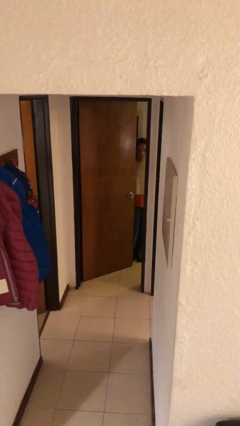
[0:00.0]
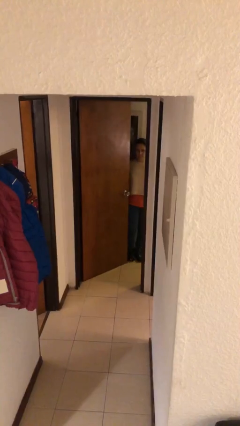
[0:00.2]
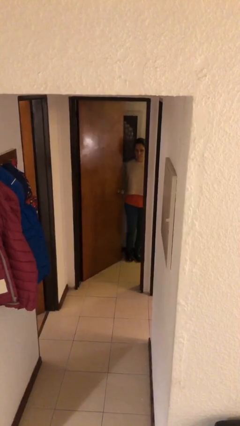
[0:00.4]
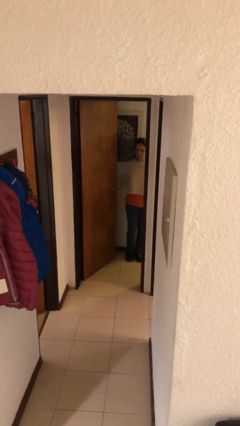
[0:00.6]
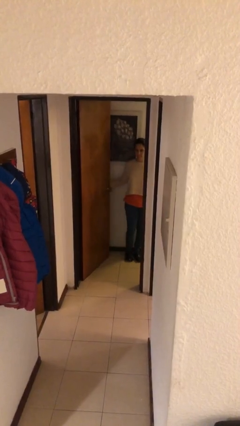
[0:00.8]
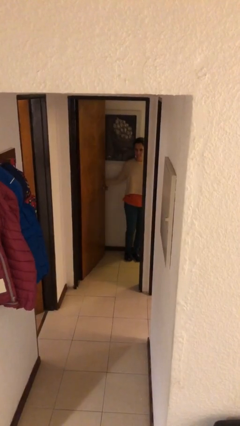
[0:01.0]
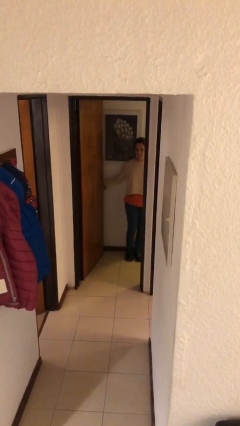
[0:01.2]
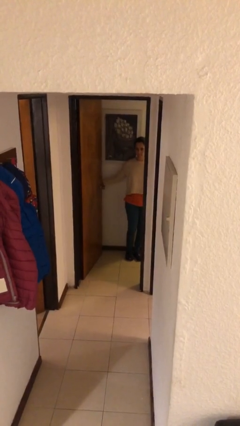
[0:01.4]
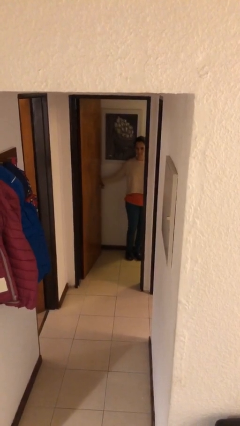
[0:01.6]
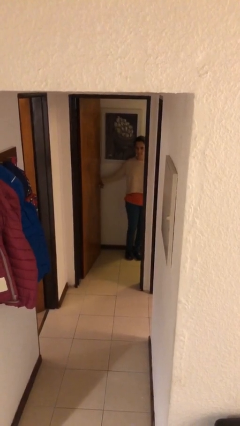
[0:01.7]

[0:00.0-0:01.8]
person opens facility door

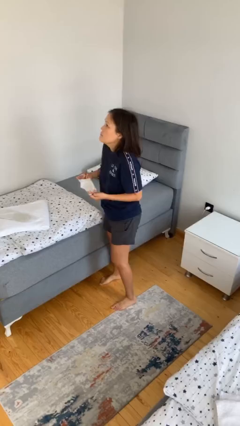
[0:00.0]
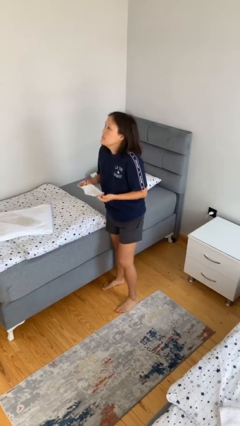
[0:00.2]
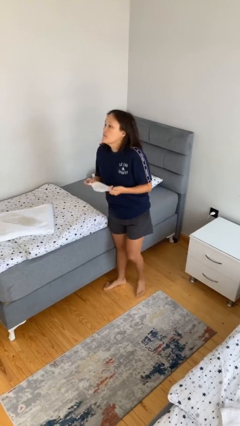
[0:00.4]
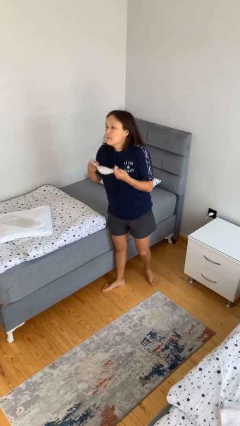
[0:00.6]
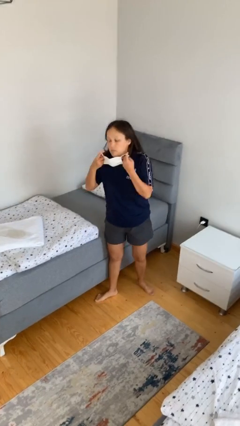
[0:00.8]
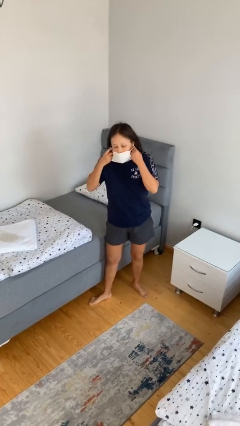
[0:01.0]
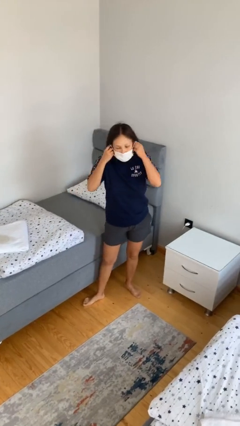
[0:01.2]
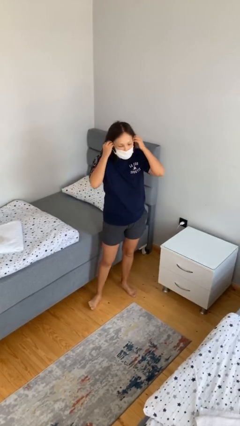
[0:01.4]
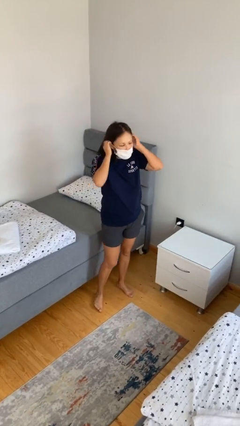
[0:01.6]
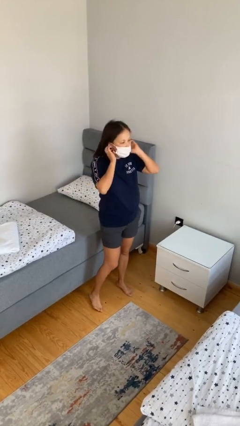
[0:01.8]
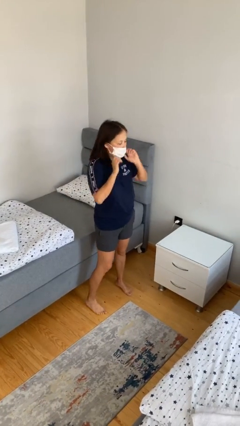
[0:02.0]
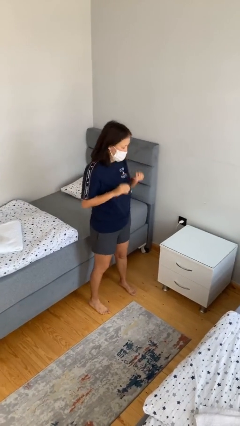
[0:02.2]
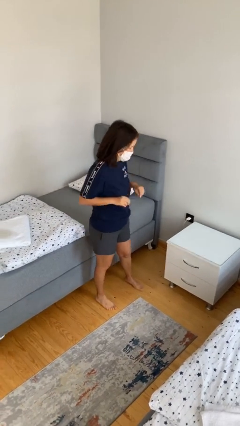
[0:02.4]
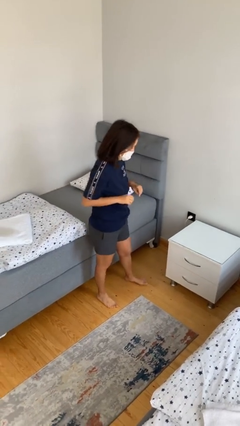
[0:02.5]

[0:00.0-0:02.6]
person puts on facemask

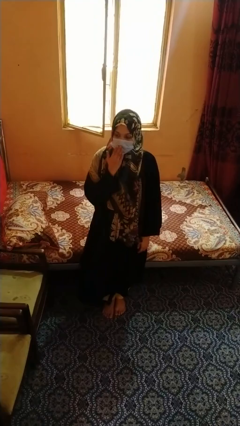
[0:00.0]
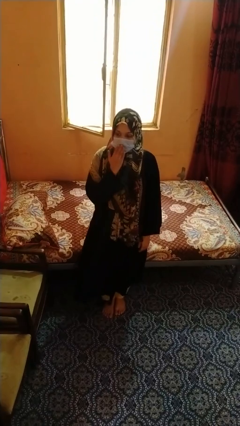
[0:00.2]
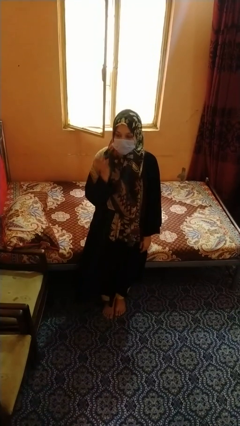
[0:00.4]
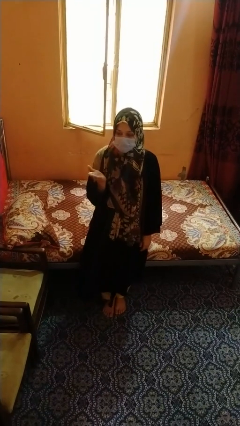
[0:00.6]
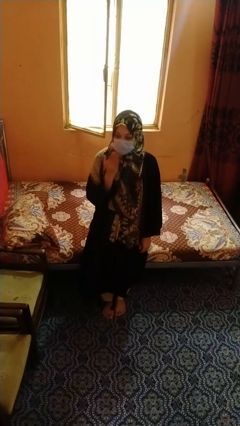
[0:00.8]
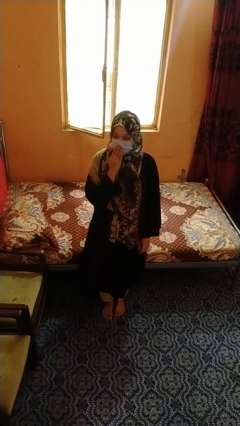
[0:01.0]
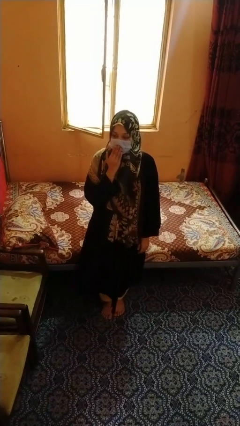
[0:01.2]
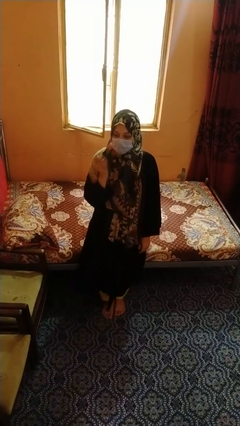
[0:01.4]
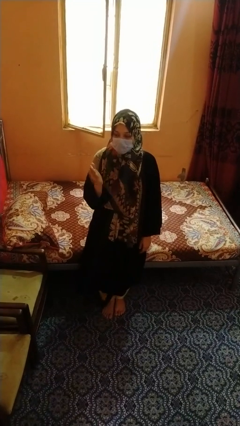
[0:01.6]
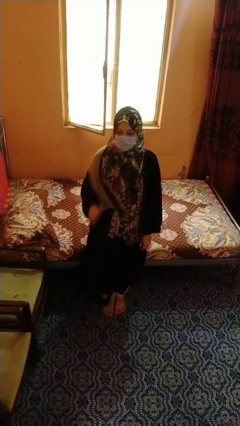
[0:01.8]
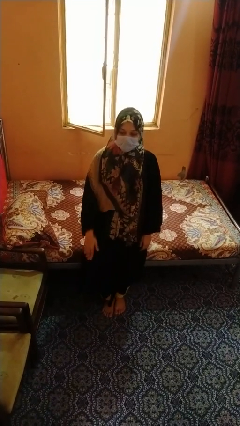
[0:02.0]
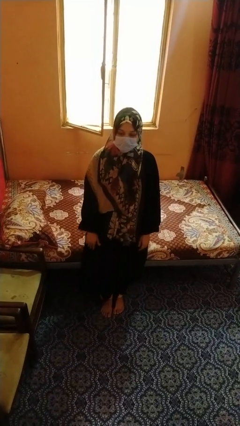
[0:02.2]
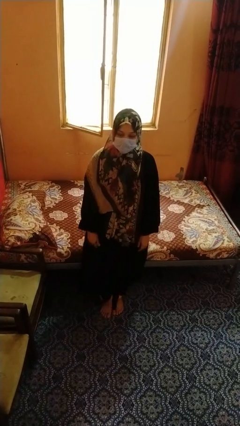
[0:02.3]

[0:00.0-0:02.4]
person gestures blow kiss

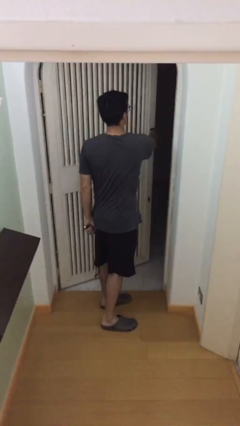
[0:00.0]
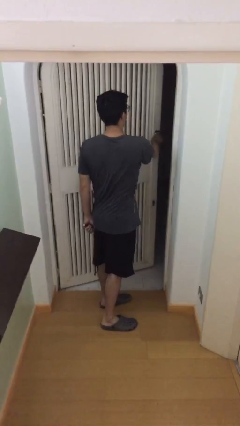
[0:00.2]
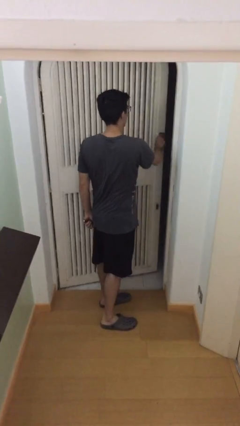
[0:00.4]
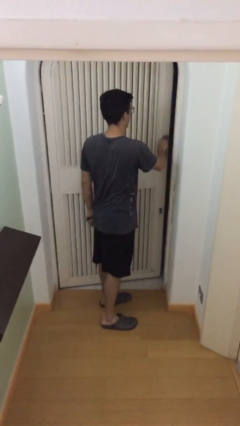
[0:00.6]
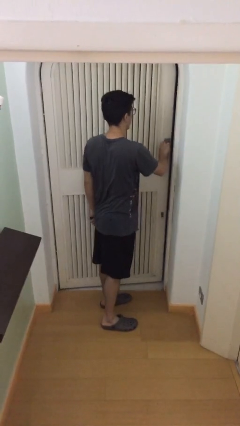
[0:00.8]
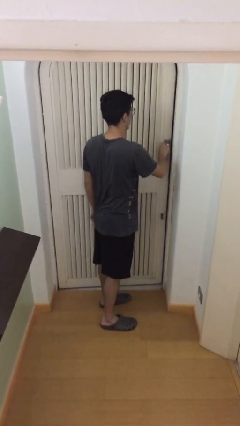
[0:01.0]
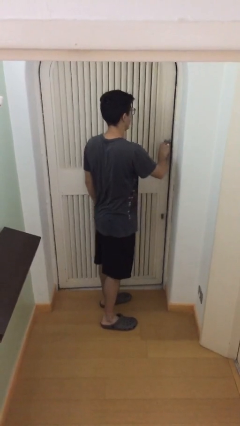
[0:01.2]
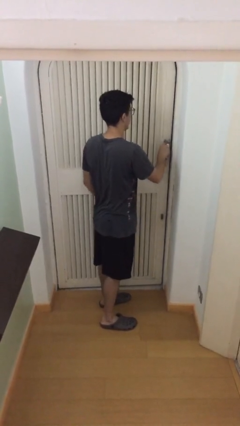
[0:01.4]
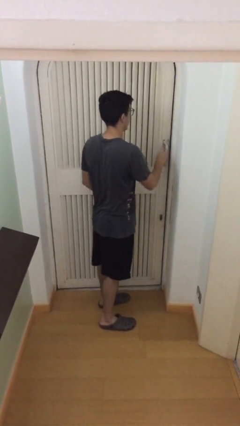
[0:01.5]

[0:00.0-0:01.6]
person closes facility door

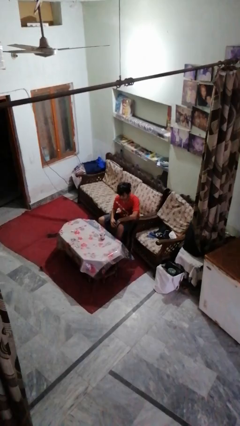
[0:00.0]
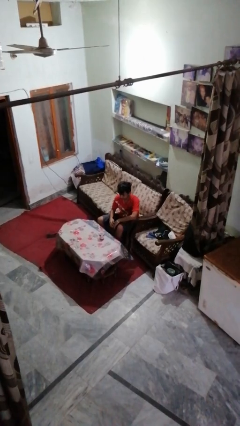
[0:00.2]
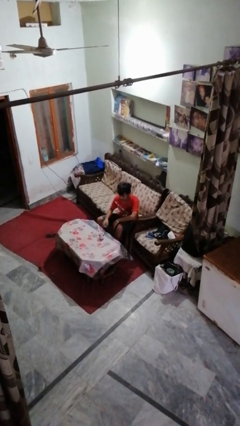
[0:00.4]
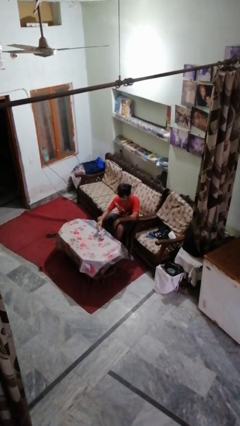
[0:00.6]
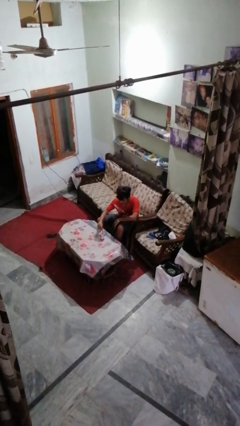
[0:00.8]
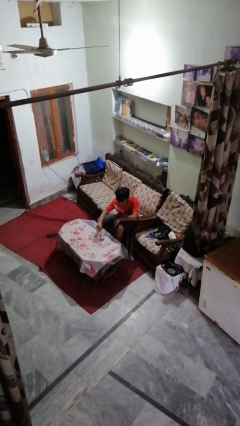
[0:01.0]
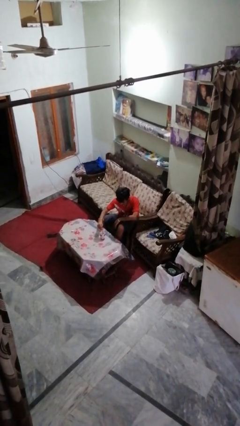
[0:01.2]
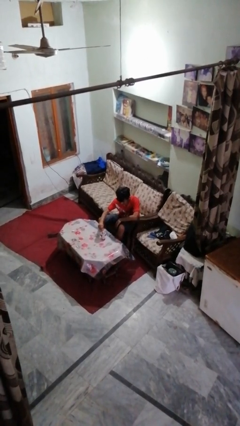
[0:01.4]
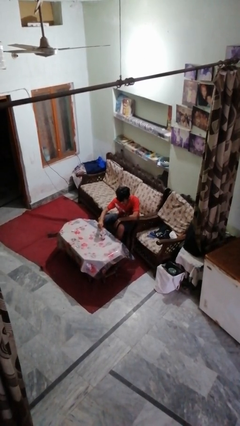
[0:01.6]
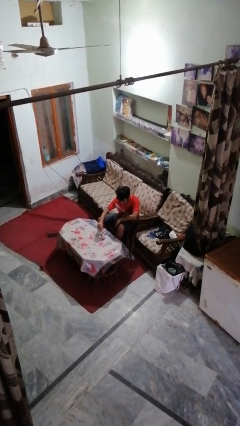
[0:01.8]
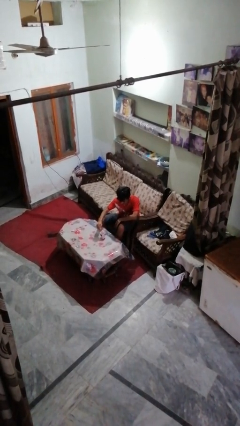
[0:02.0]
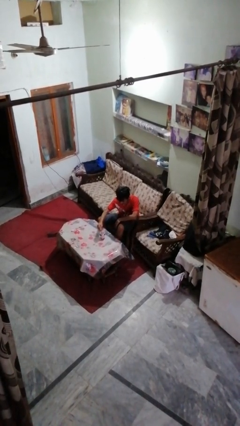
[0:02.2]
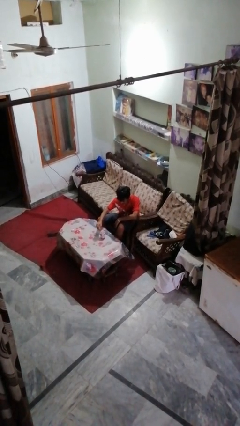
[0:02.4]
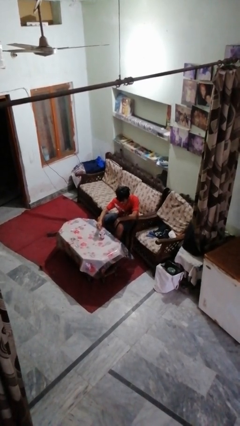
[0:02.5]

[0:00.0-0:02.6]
person stirs mug

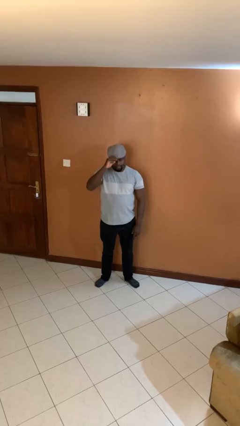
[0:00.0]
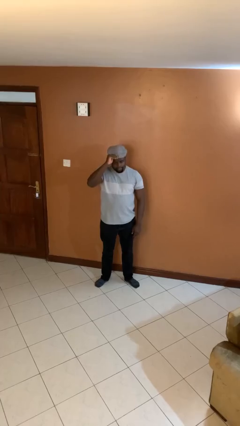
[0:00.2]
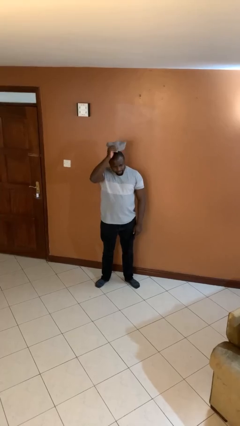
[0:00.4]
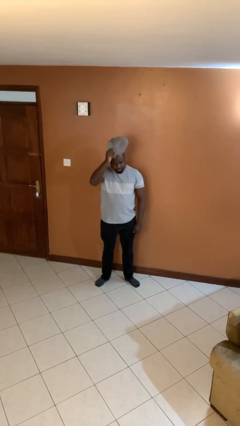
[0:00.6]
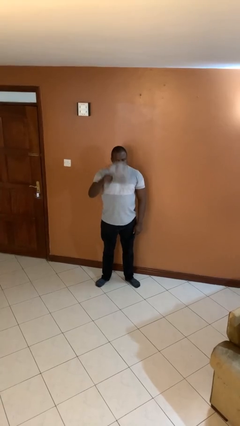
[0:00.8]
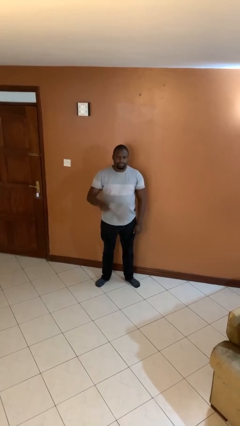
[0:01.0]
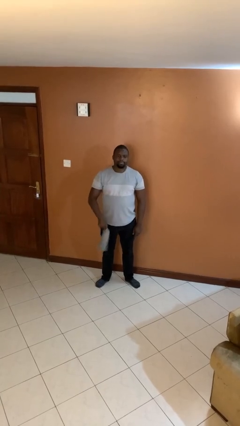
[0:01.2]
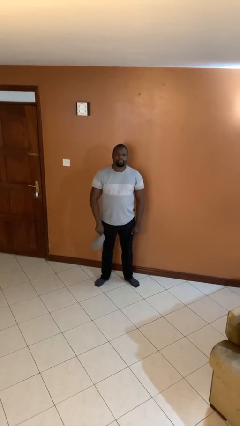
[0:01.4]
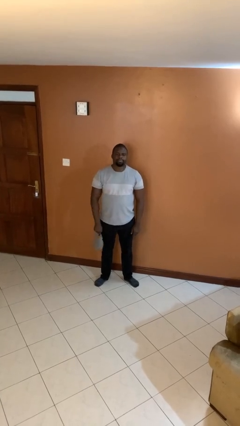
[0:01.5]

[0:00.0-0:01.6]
person takes off hat

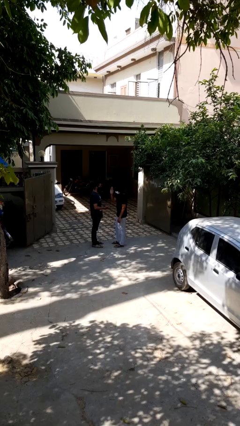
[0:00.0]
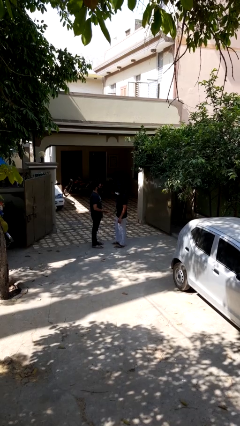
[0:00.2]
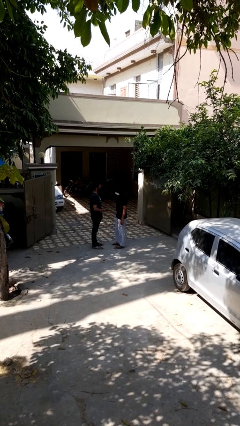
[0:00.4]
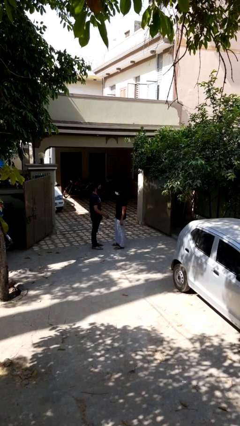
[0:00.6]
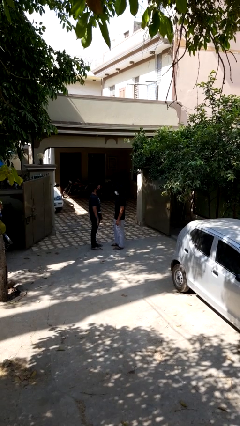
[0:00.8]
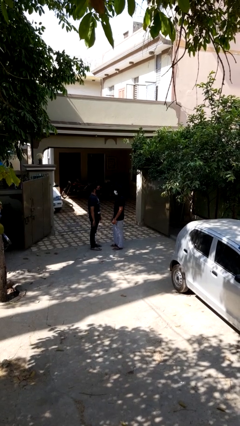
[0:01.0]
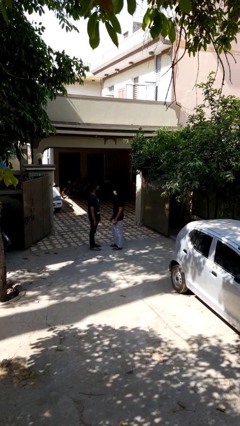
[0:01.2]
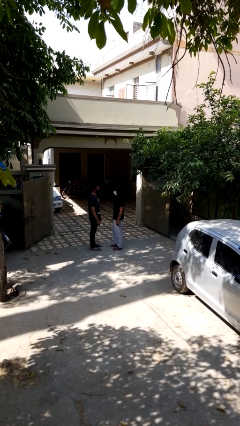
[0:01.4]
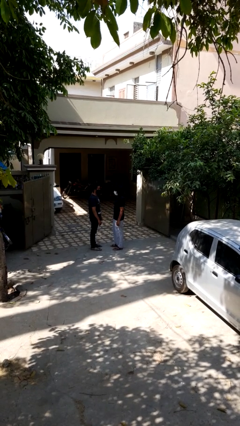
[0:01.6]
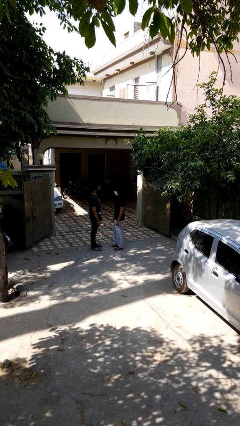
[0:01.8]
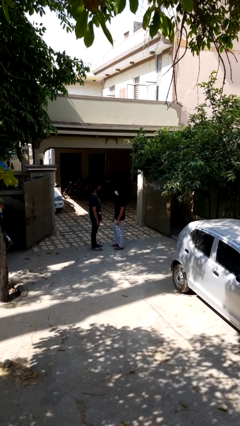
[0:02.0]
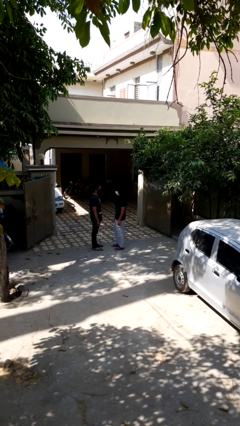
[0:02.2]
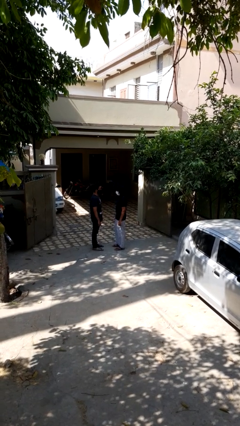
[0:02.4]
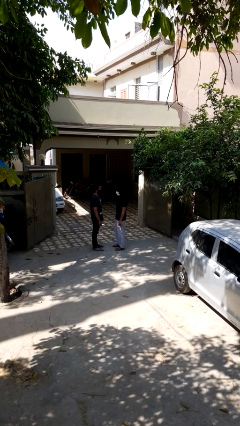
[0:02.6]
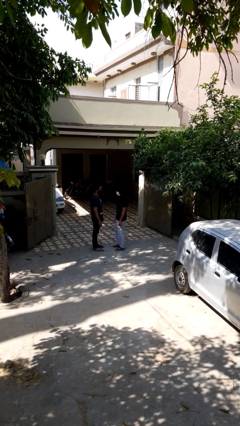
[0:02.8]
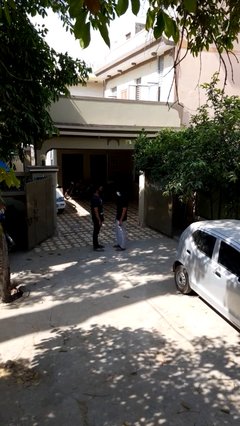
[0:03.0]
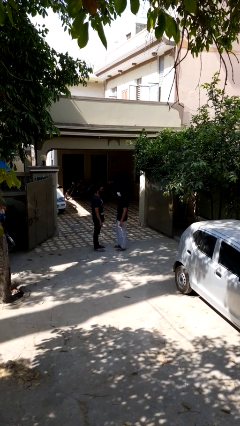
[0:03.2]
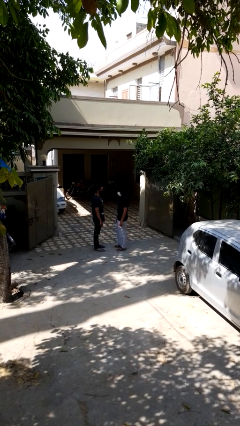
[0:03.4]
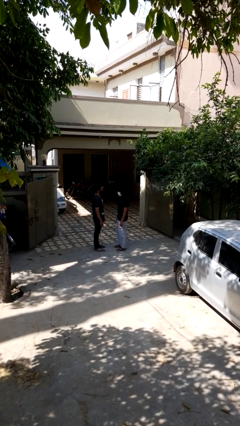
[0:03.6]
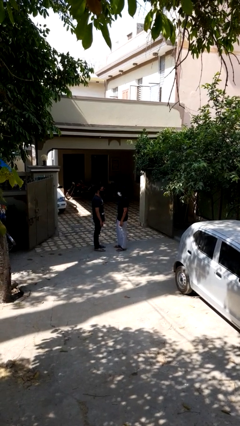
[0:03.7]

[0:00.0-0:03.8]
person highfives hand

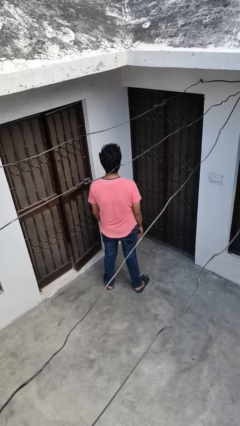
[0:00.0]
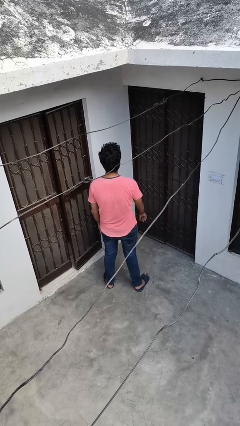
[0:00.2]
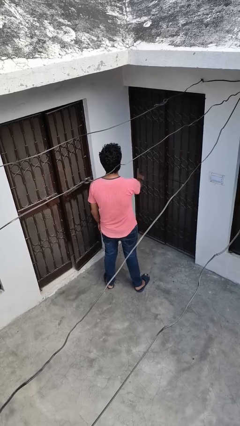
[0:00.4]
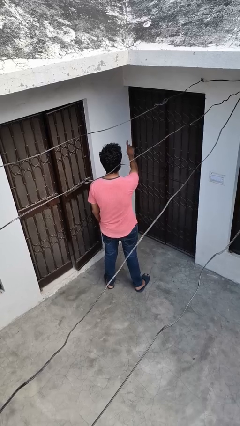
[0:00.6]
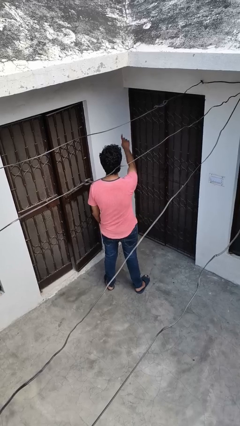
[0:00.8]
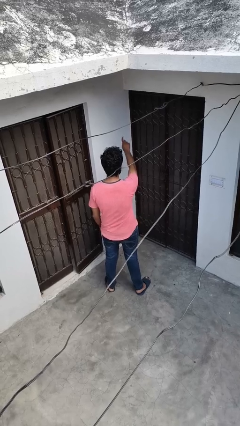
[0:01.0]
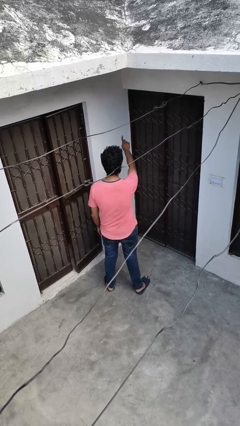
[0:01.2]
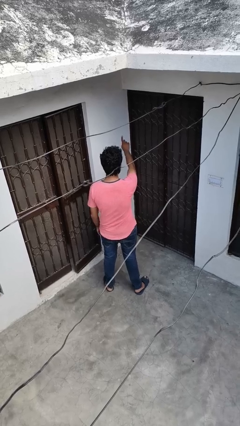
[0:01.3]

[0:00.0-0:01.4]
person gestures number one
